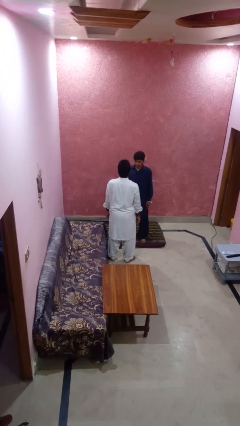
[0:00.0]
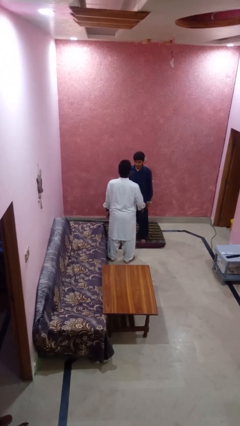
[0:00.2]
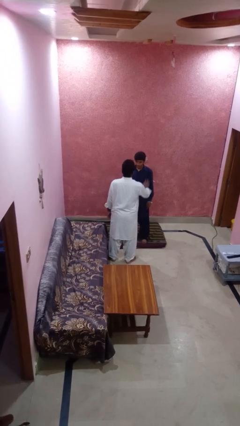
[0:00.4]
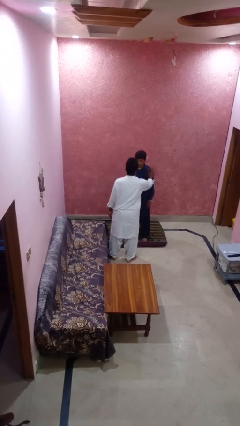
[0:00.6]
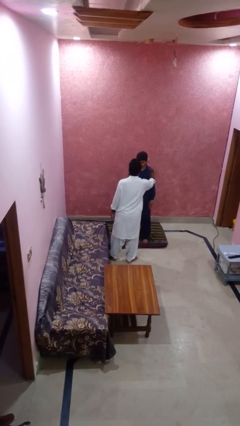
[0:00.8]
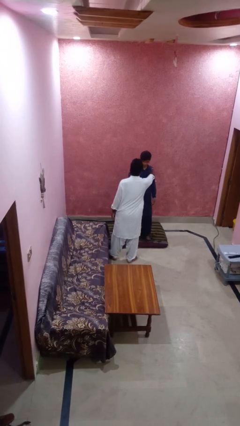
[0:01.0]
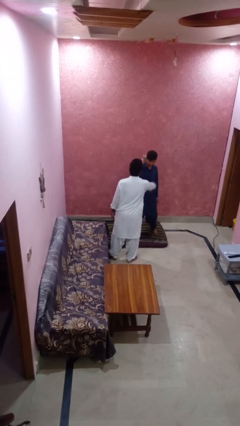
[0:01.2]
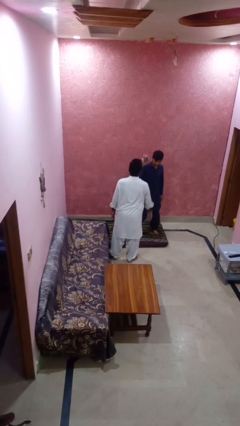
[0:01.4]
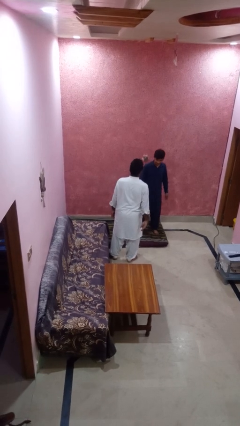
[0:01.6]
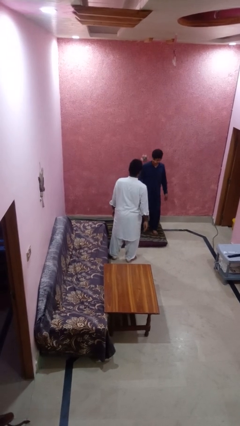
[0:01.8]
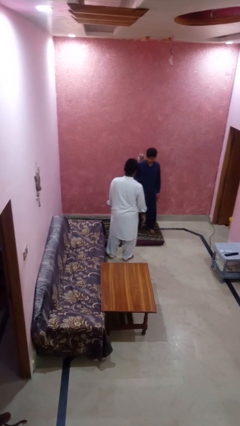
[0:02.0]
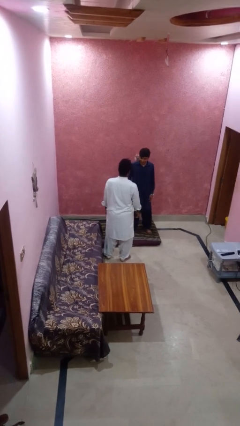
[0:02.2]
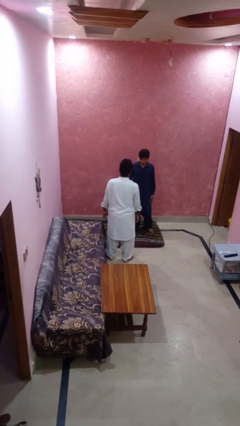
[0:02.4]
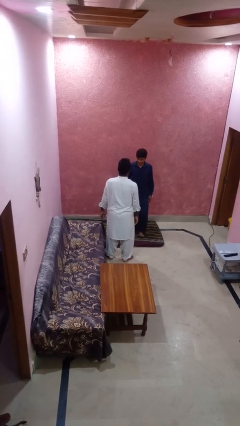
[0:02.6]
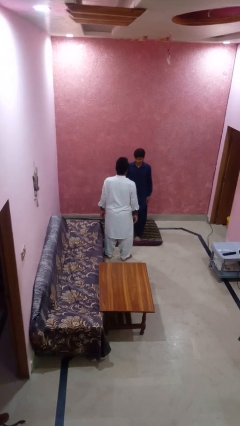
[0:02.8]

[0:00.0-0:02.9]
person shoves person

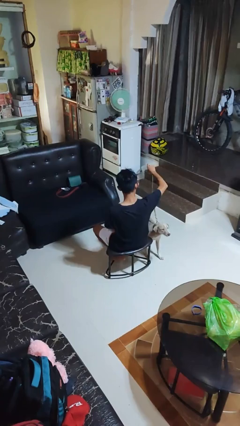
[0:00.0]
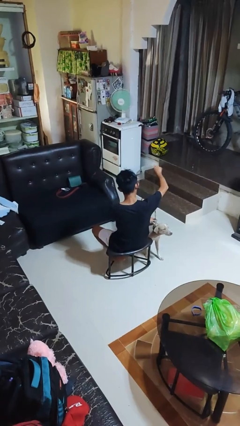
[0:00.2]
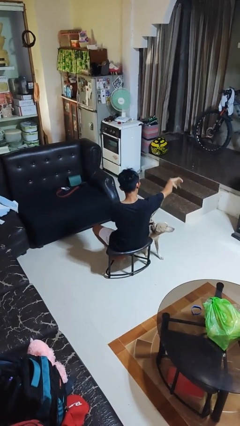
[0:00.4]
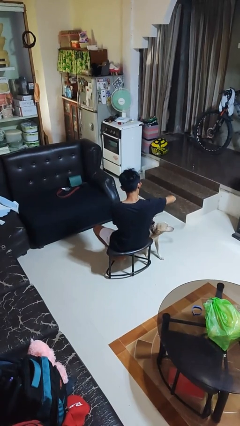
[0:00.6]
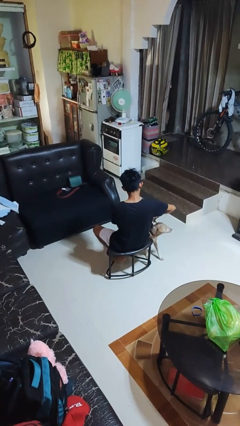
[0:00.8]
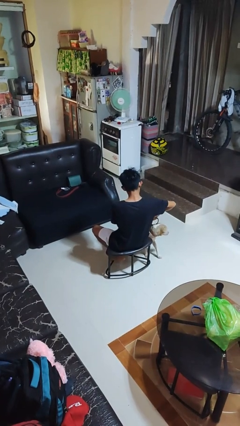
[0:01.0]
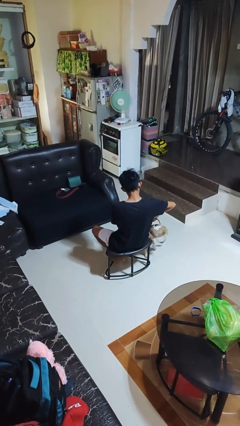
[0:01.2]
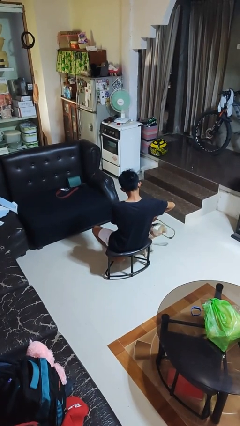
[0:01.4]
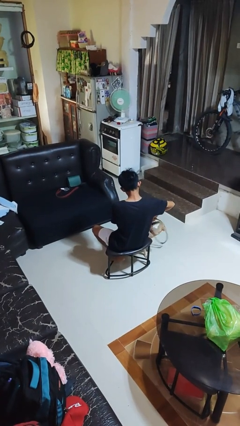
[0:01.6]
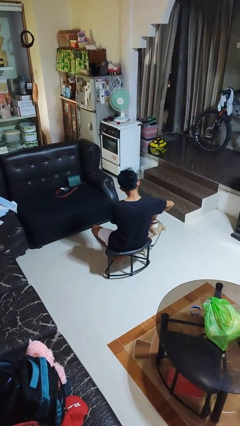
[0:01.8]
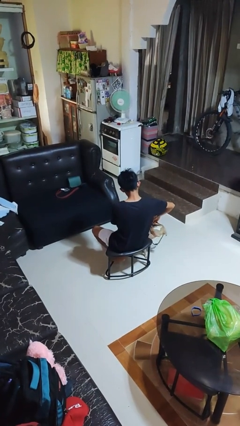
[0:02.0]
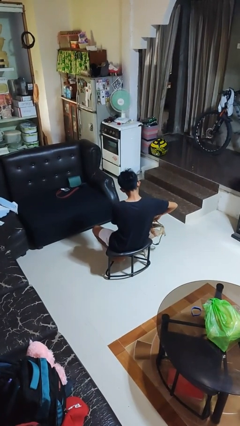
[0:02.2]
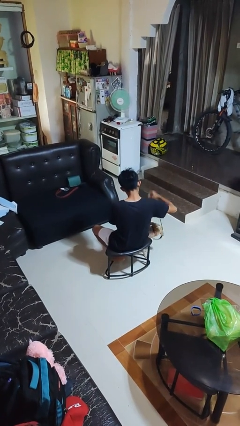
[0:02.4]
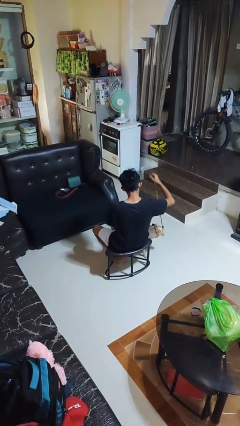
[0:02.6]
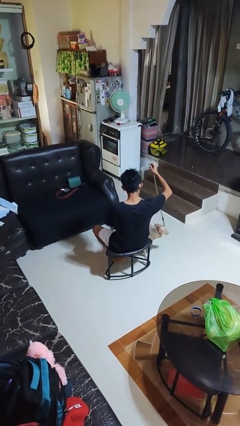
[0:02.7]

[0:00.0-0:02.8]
person unattaches leash from dog

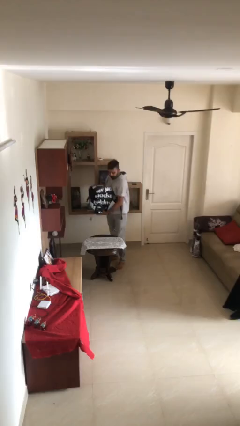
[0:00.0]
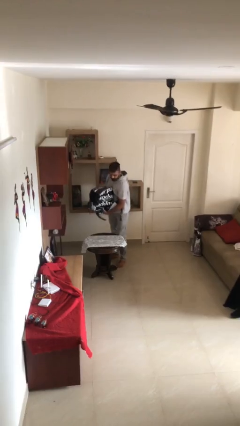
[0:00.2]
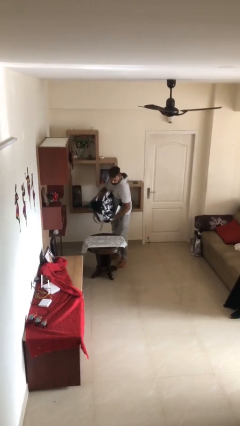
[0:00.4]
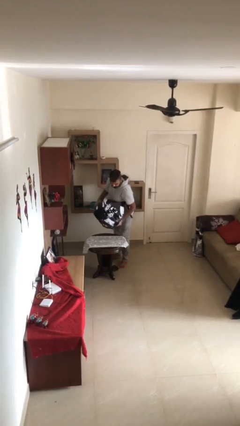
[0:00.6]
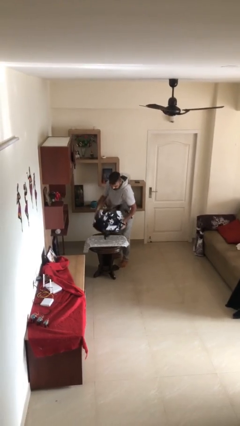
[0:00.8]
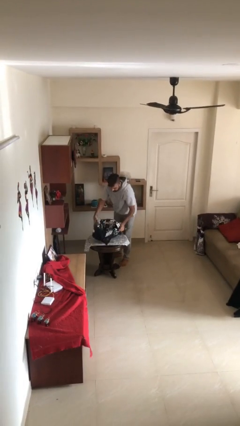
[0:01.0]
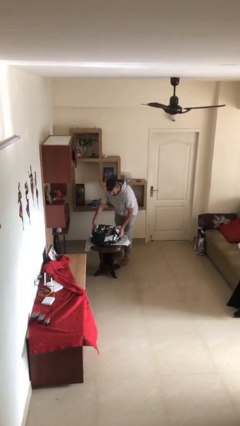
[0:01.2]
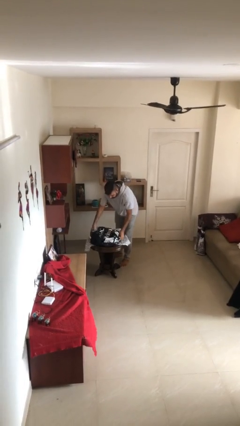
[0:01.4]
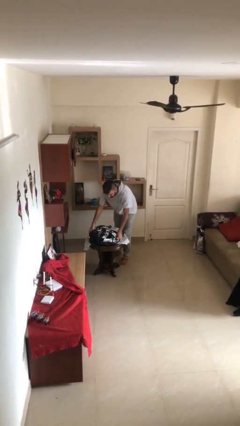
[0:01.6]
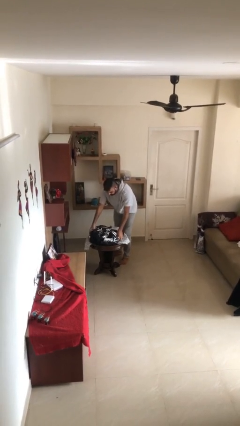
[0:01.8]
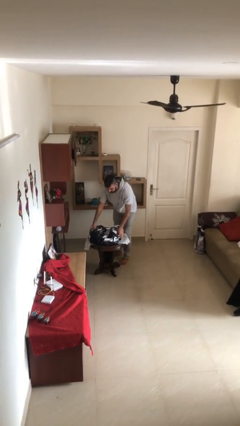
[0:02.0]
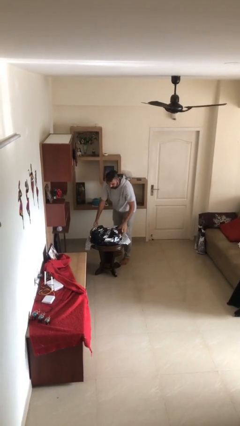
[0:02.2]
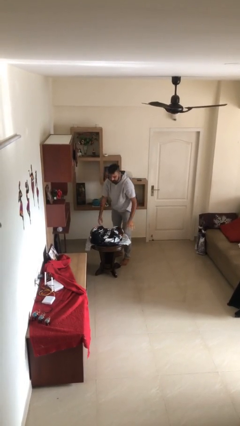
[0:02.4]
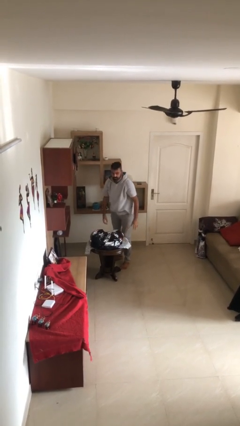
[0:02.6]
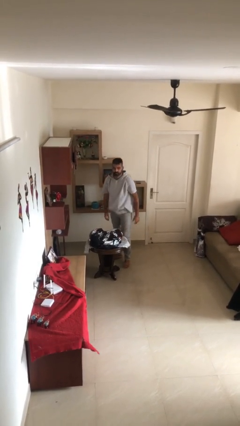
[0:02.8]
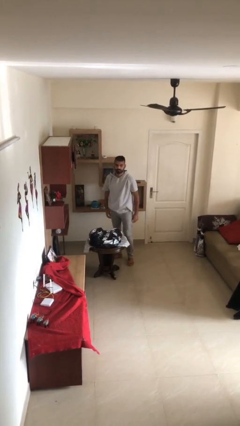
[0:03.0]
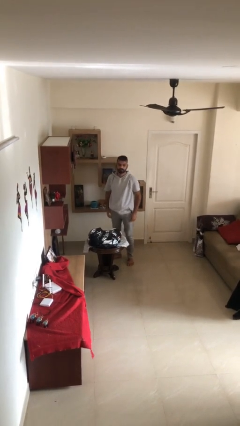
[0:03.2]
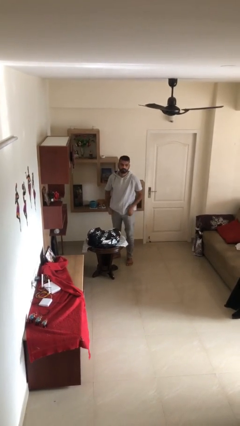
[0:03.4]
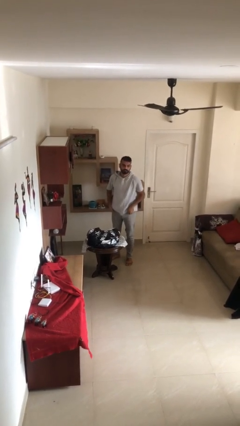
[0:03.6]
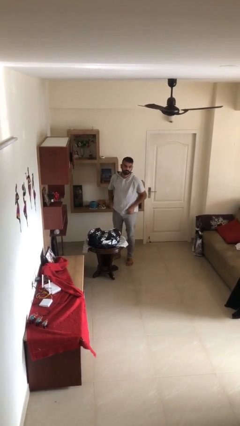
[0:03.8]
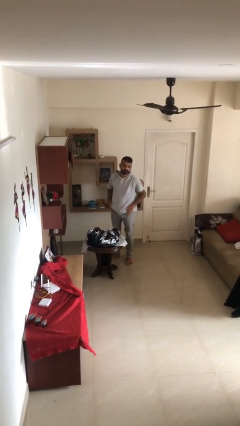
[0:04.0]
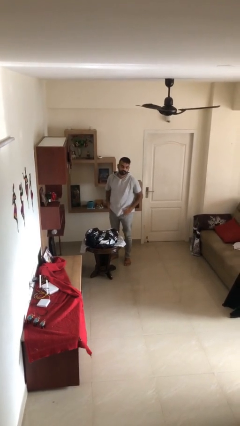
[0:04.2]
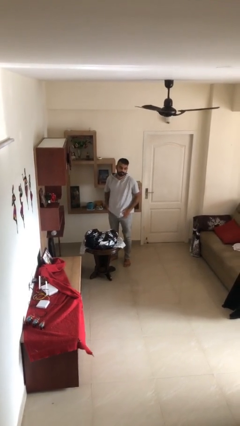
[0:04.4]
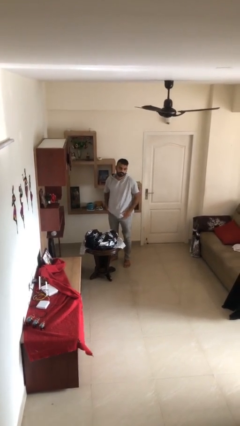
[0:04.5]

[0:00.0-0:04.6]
person puts down object on table

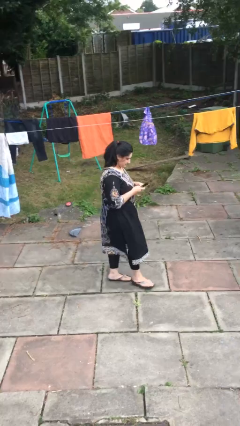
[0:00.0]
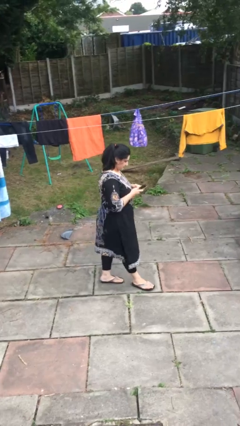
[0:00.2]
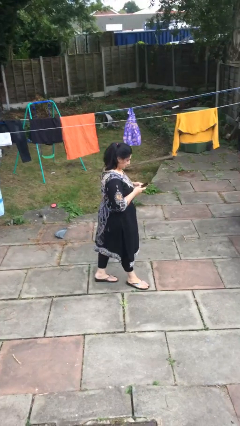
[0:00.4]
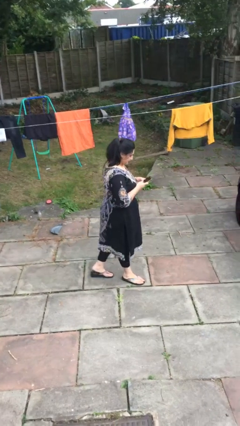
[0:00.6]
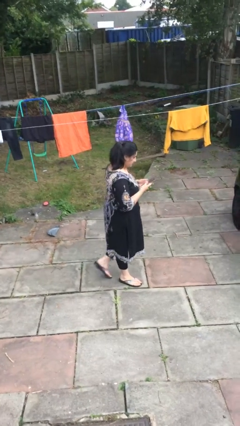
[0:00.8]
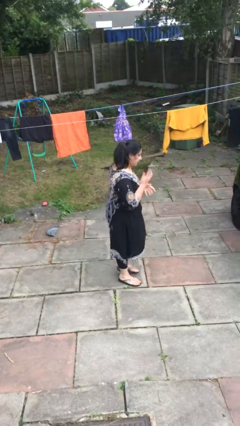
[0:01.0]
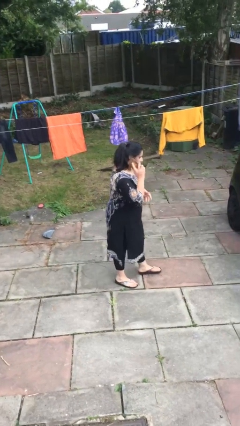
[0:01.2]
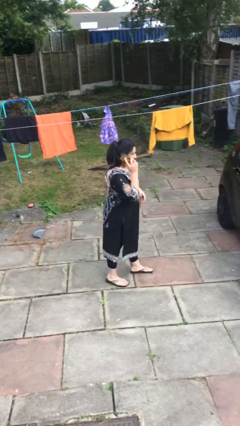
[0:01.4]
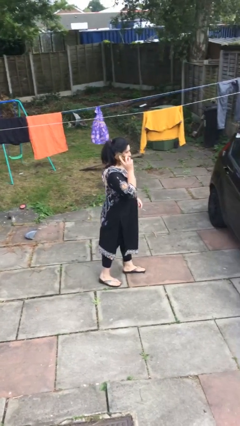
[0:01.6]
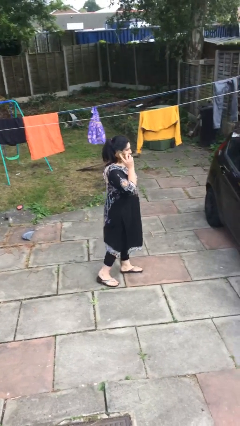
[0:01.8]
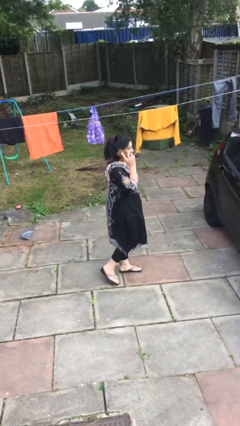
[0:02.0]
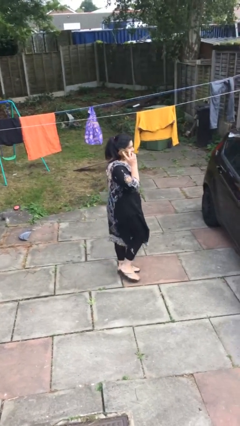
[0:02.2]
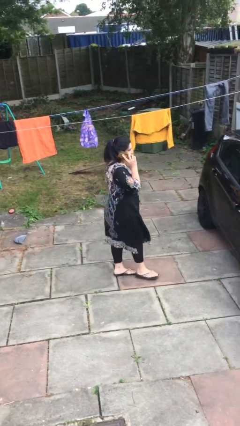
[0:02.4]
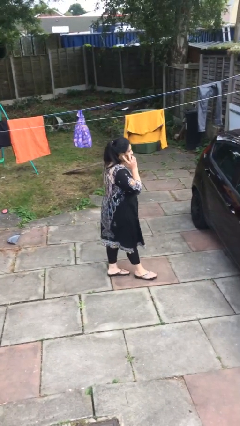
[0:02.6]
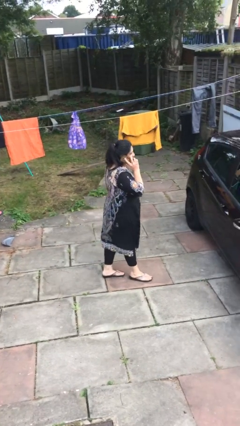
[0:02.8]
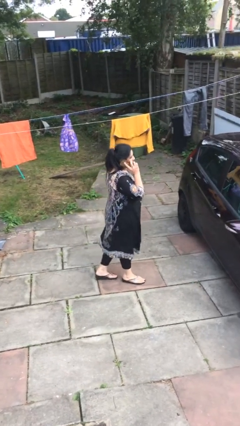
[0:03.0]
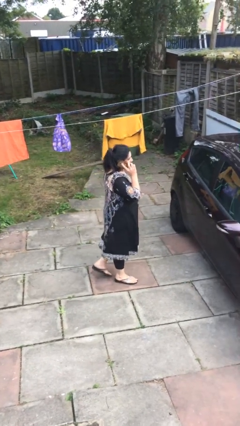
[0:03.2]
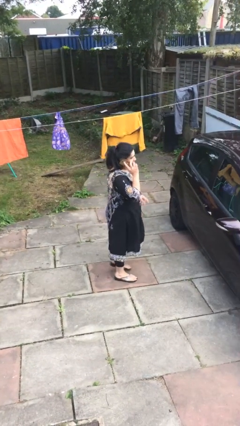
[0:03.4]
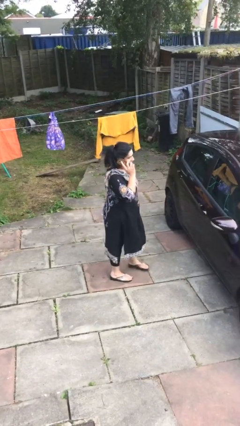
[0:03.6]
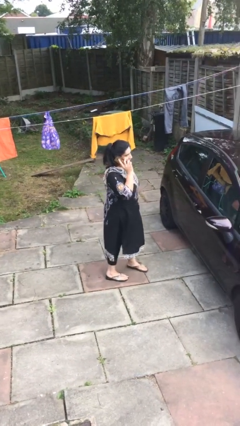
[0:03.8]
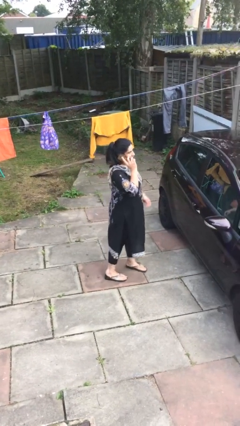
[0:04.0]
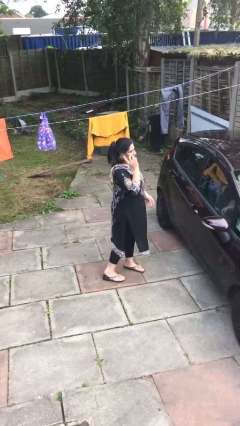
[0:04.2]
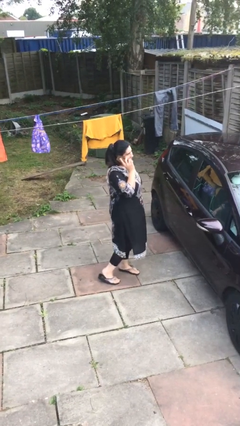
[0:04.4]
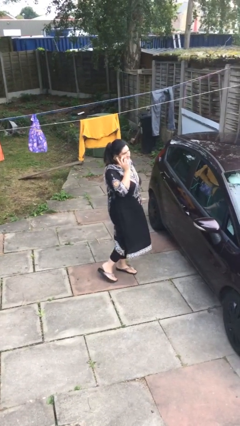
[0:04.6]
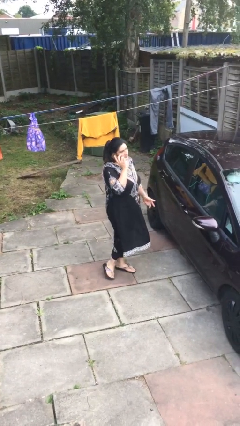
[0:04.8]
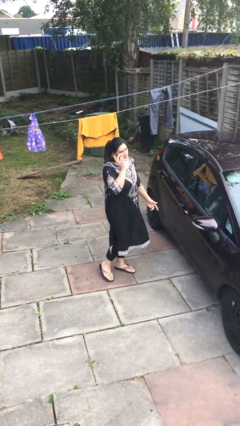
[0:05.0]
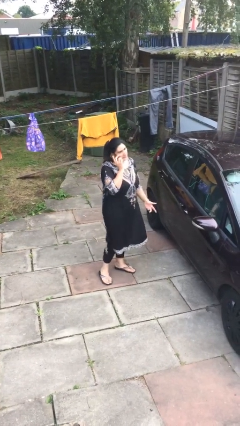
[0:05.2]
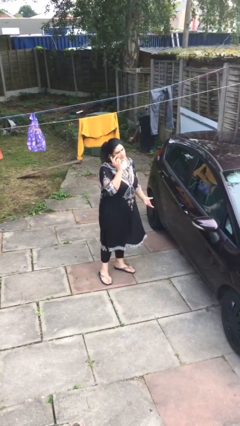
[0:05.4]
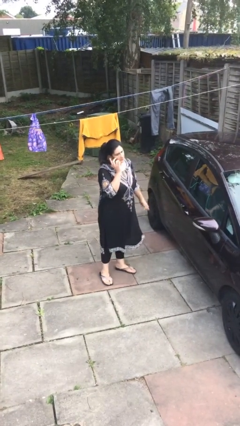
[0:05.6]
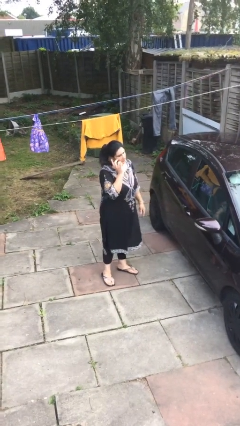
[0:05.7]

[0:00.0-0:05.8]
person talks on phone

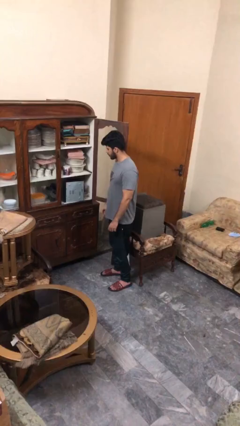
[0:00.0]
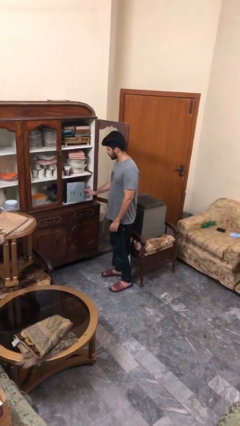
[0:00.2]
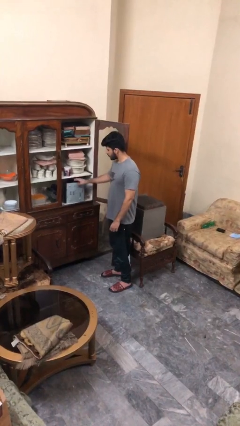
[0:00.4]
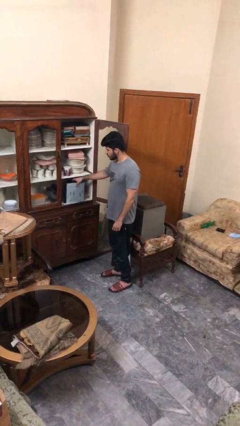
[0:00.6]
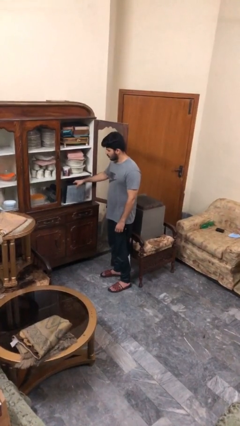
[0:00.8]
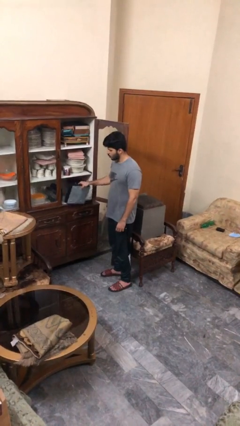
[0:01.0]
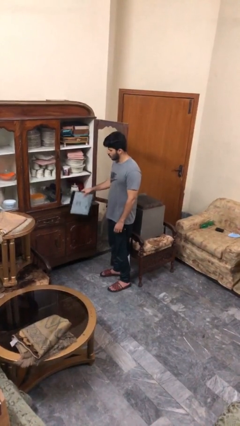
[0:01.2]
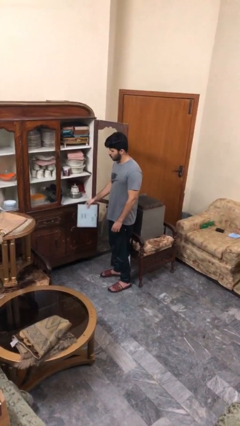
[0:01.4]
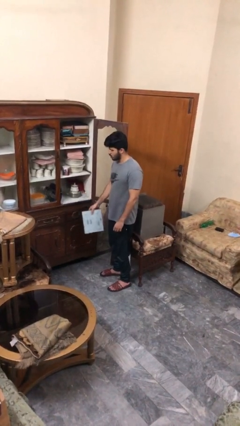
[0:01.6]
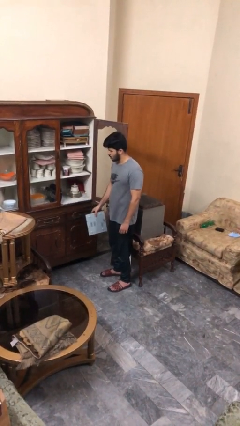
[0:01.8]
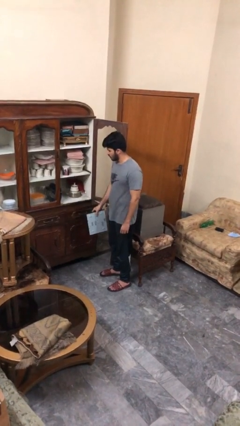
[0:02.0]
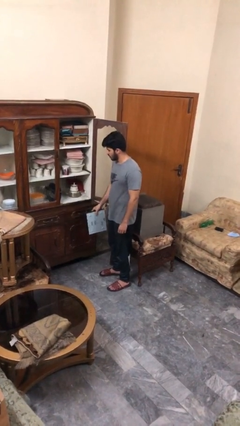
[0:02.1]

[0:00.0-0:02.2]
person picks up object from countertop
